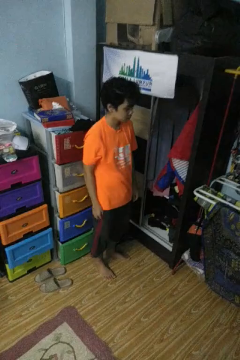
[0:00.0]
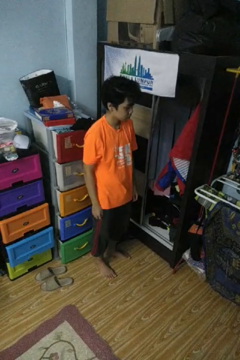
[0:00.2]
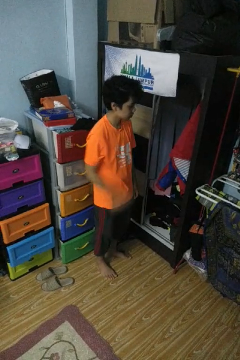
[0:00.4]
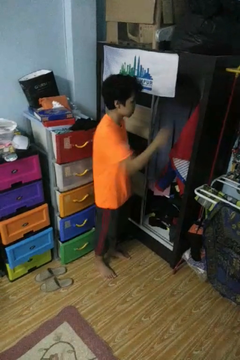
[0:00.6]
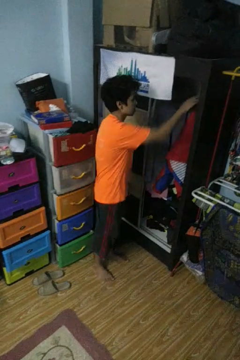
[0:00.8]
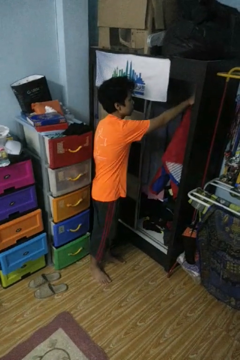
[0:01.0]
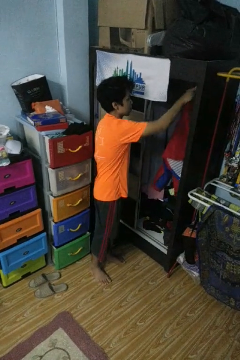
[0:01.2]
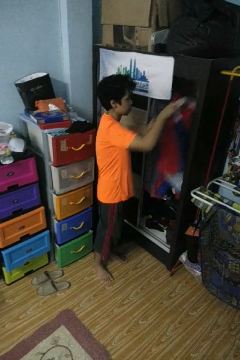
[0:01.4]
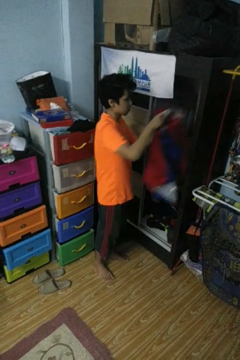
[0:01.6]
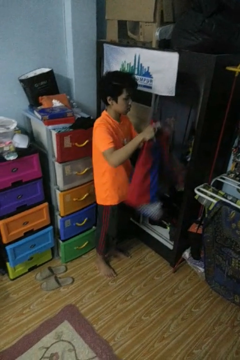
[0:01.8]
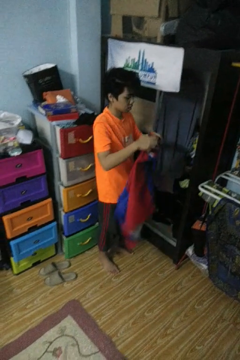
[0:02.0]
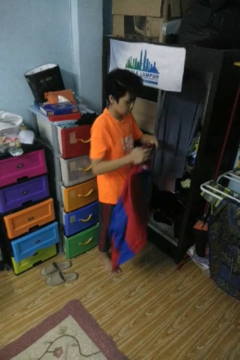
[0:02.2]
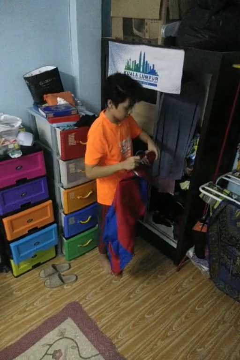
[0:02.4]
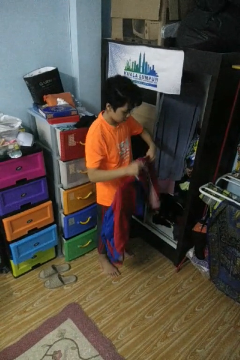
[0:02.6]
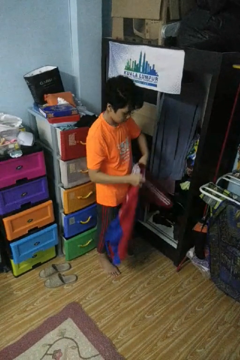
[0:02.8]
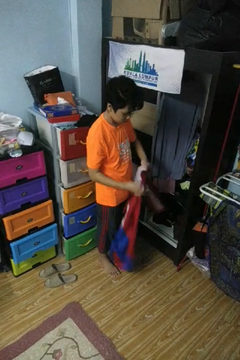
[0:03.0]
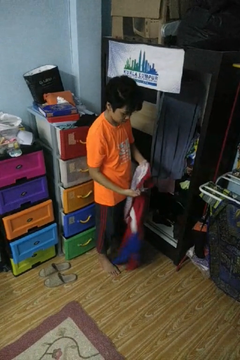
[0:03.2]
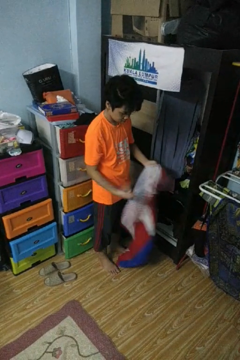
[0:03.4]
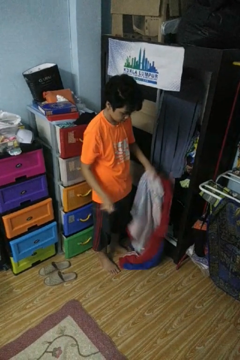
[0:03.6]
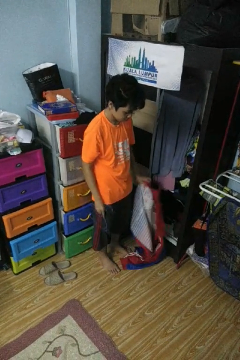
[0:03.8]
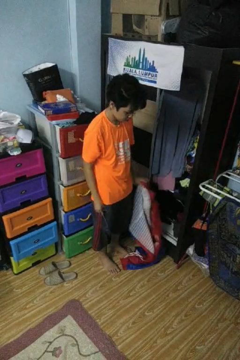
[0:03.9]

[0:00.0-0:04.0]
person takes clothes from closet

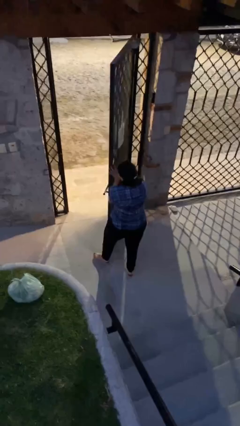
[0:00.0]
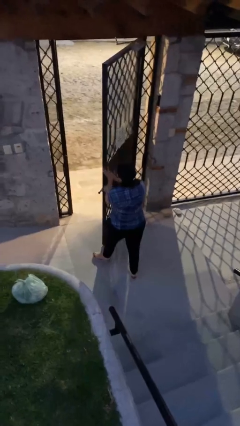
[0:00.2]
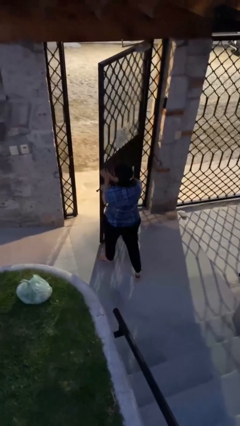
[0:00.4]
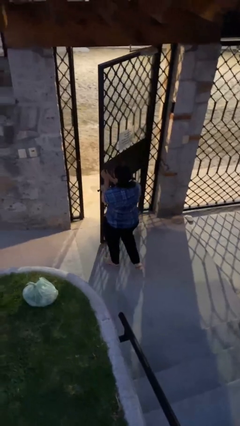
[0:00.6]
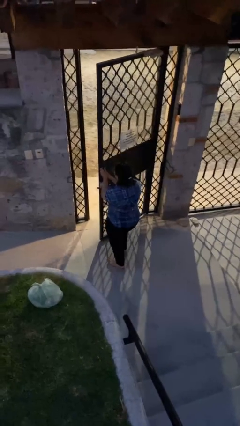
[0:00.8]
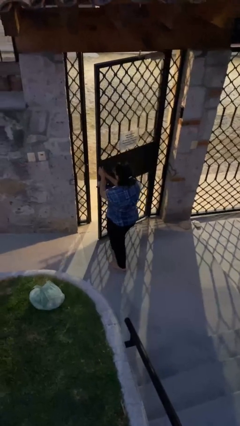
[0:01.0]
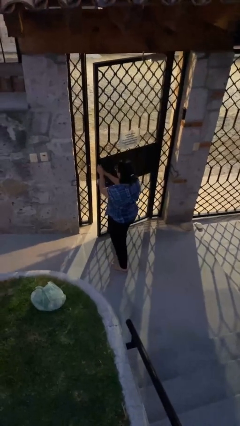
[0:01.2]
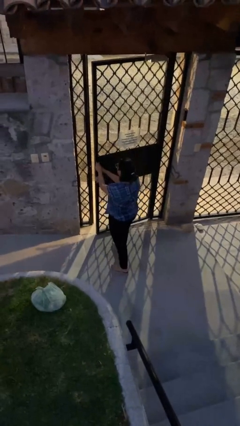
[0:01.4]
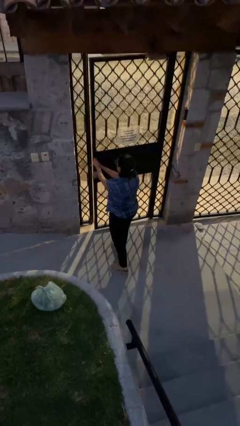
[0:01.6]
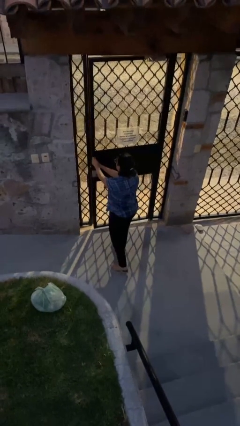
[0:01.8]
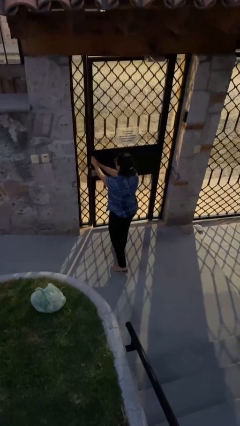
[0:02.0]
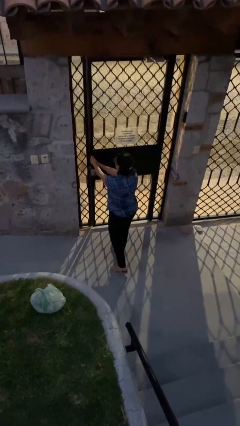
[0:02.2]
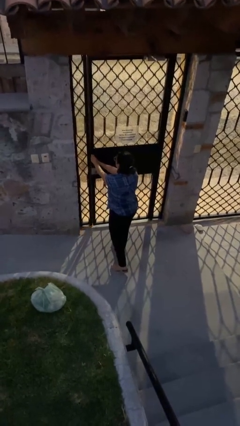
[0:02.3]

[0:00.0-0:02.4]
person closes facility door

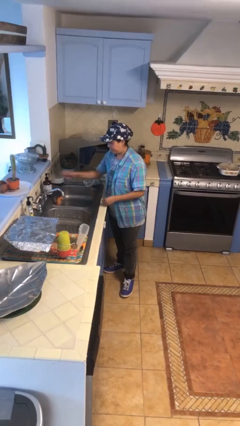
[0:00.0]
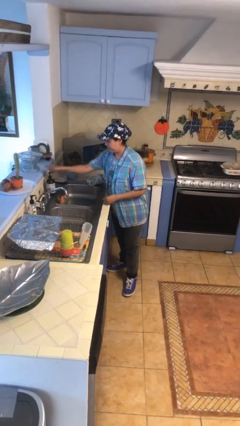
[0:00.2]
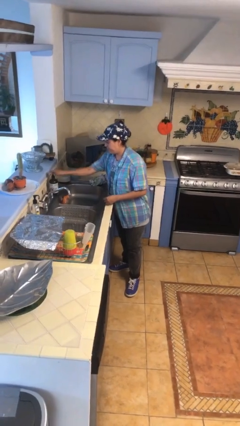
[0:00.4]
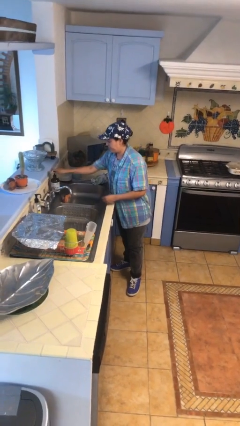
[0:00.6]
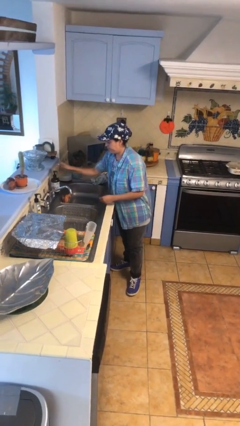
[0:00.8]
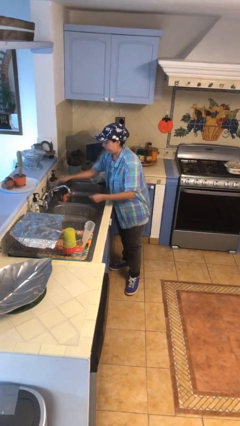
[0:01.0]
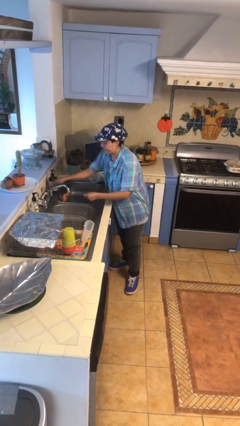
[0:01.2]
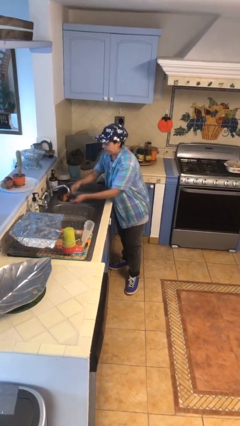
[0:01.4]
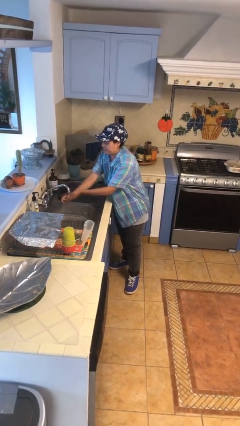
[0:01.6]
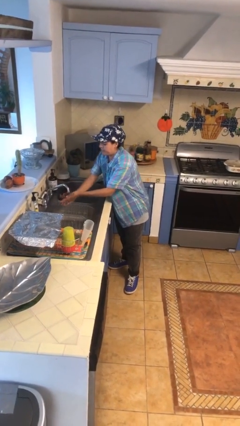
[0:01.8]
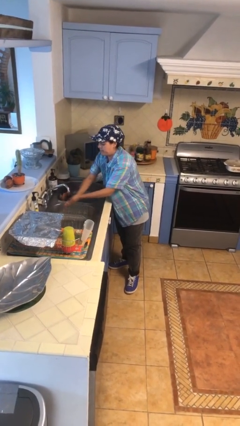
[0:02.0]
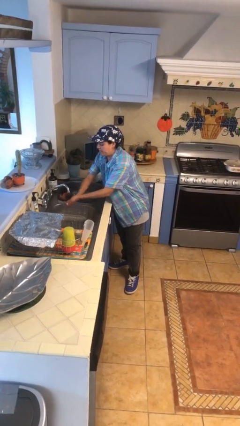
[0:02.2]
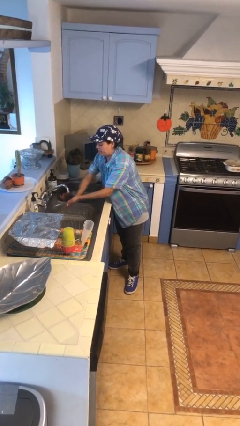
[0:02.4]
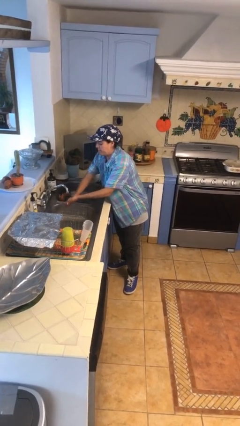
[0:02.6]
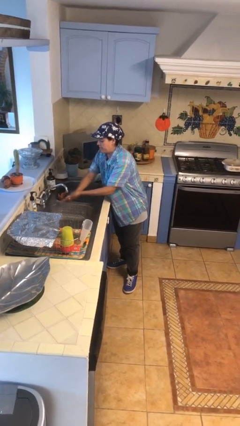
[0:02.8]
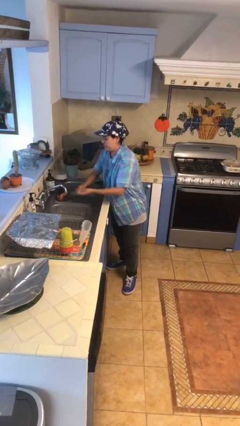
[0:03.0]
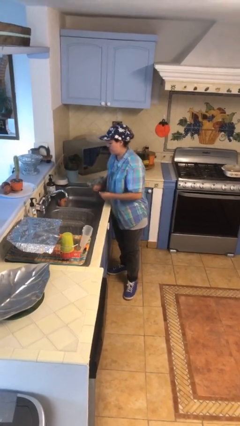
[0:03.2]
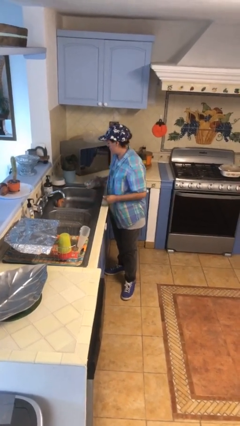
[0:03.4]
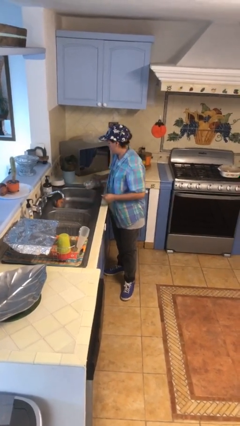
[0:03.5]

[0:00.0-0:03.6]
person washes hands

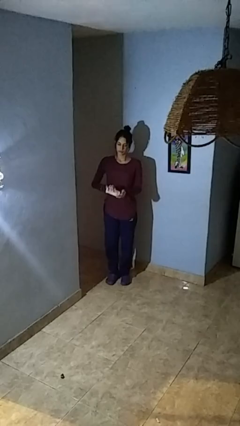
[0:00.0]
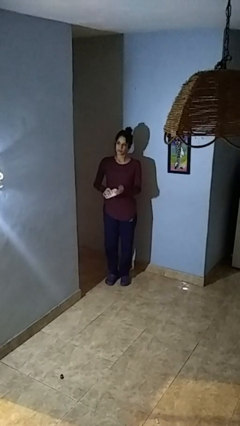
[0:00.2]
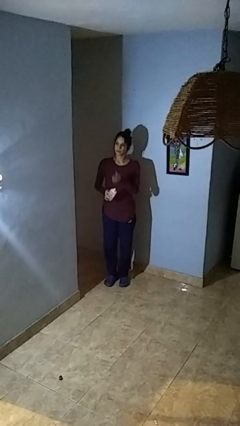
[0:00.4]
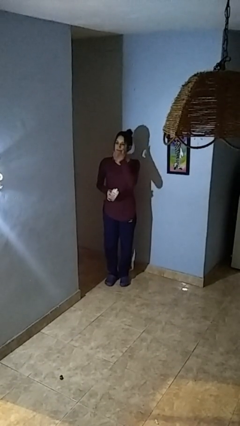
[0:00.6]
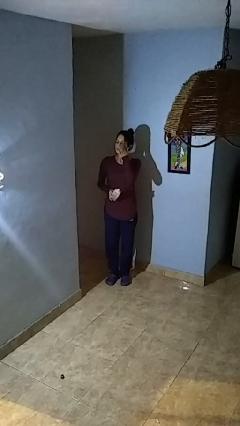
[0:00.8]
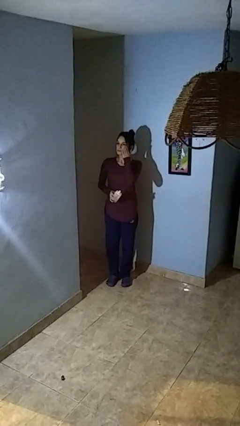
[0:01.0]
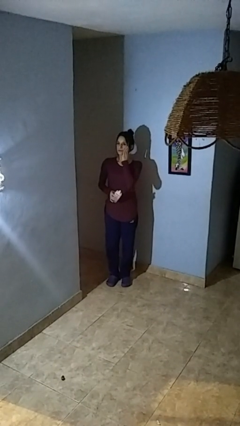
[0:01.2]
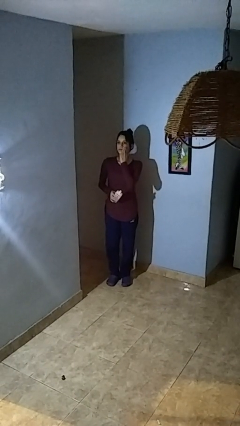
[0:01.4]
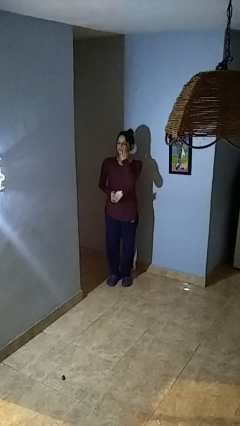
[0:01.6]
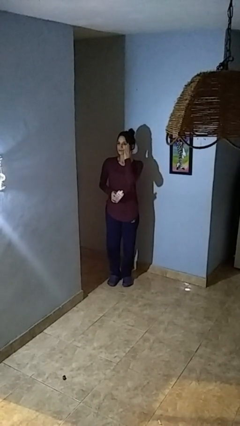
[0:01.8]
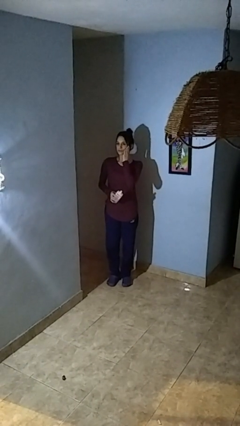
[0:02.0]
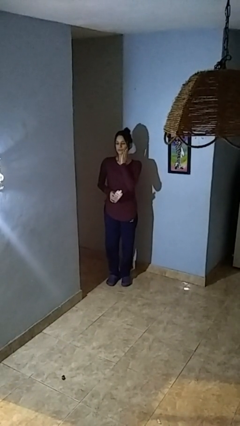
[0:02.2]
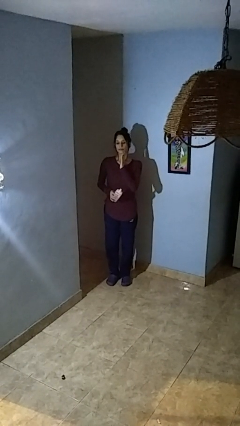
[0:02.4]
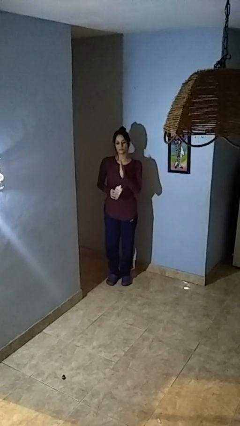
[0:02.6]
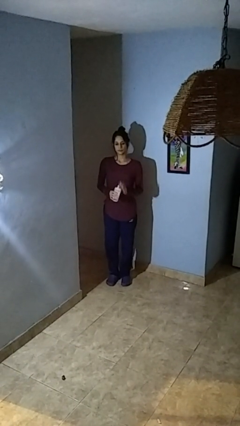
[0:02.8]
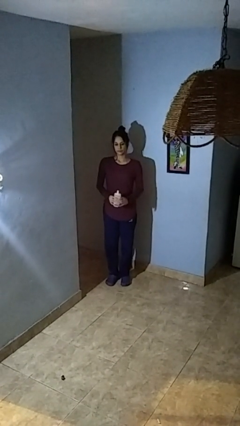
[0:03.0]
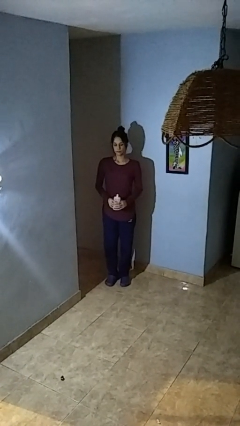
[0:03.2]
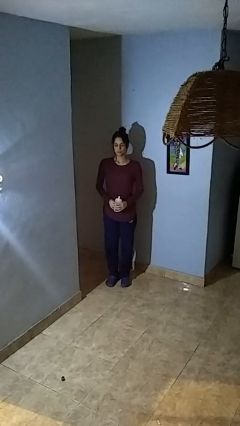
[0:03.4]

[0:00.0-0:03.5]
person applies facial moisturizer

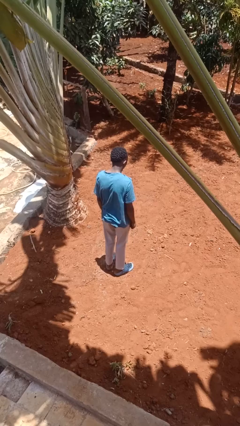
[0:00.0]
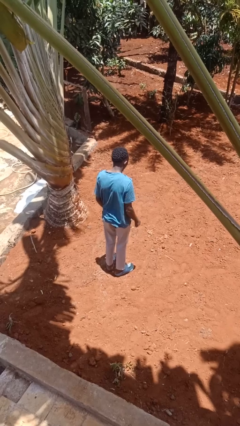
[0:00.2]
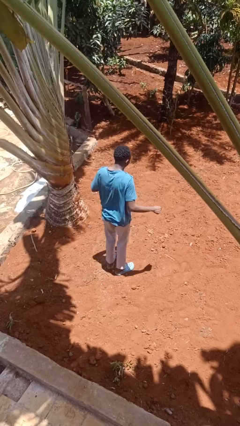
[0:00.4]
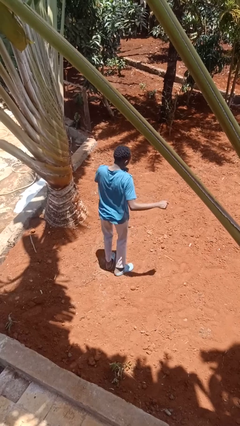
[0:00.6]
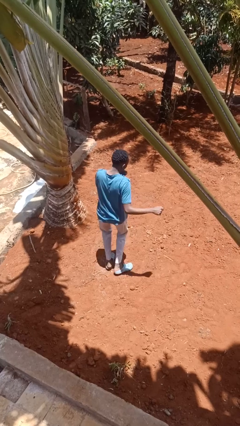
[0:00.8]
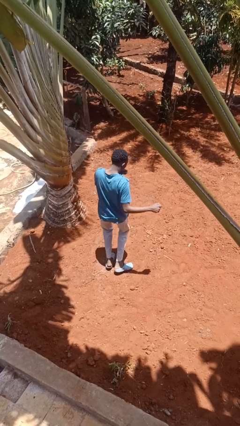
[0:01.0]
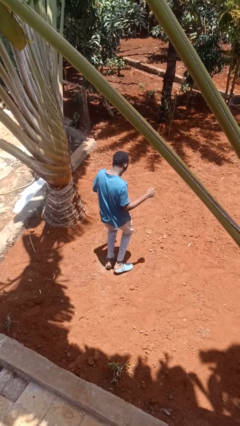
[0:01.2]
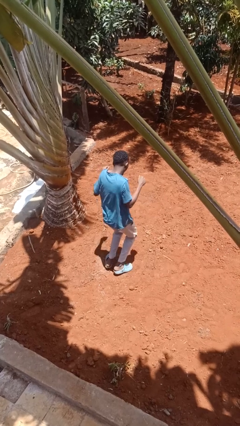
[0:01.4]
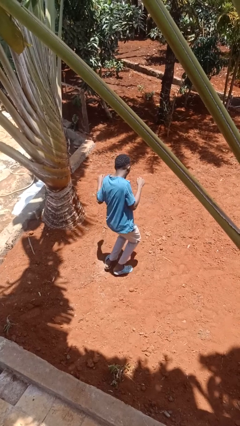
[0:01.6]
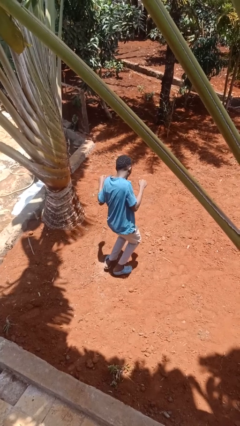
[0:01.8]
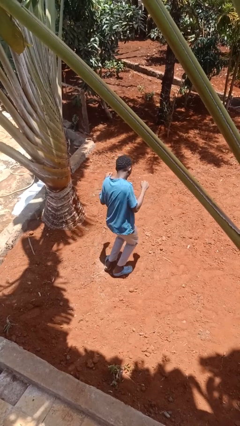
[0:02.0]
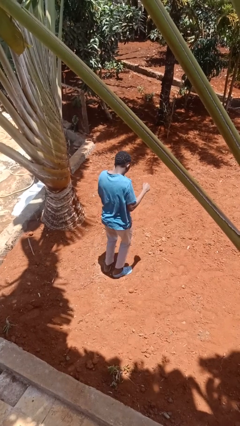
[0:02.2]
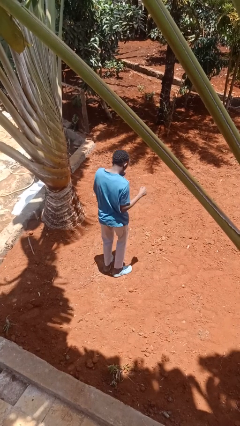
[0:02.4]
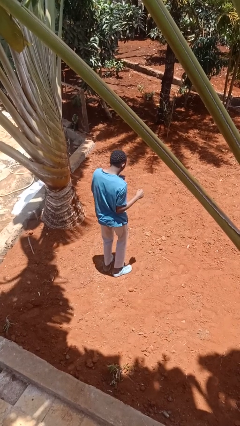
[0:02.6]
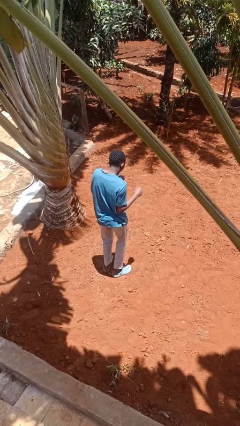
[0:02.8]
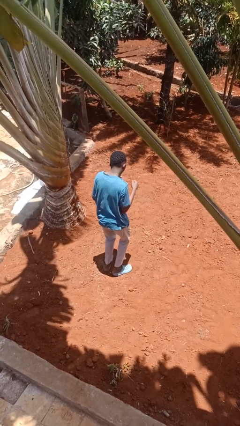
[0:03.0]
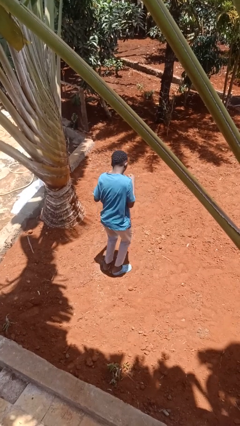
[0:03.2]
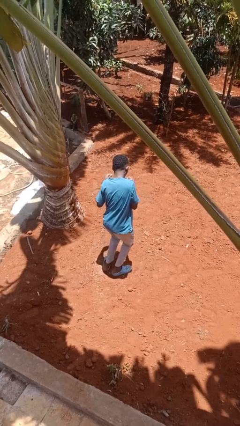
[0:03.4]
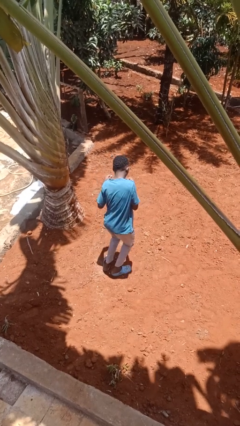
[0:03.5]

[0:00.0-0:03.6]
person dances in place

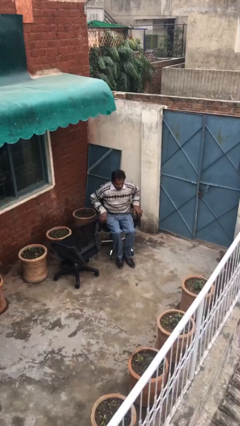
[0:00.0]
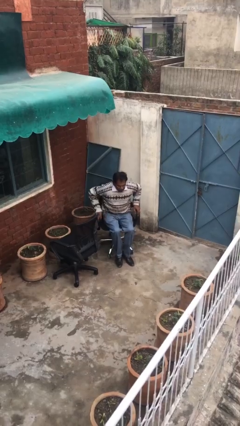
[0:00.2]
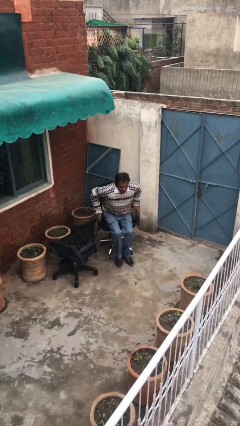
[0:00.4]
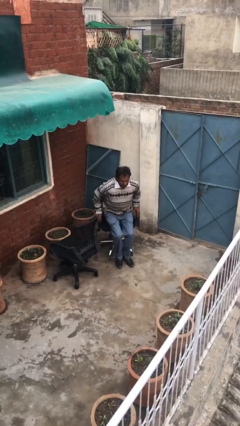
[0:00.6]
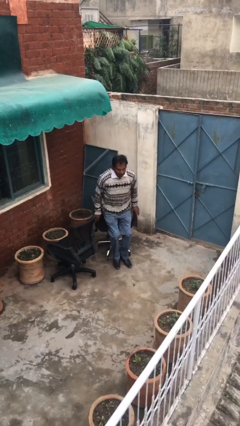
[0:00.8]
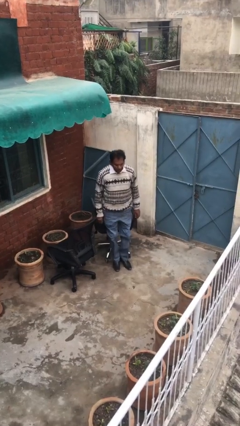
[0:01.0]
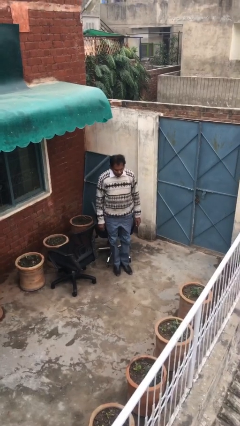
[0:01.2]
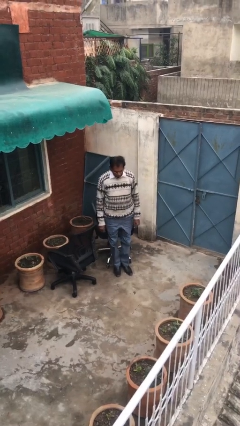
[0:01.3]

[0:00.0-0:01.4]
person stands up
